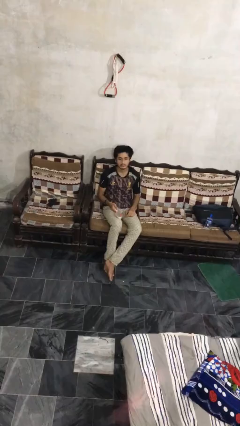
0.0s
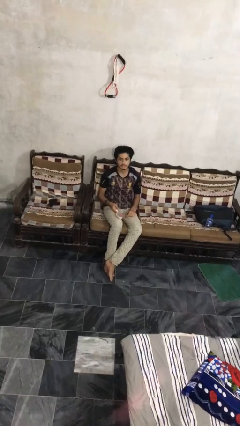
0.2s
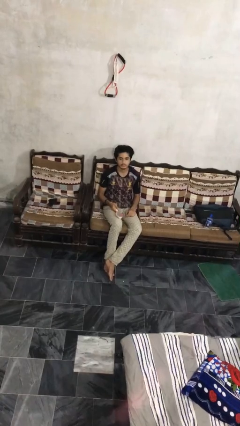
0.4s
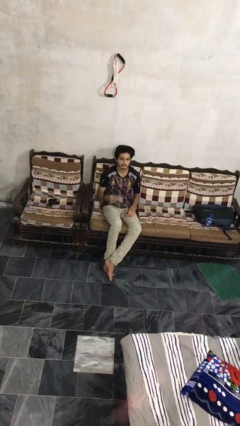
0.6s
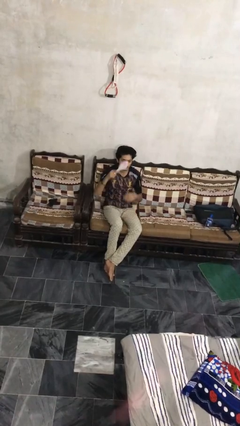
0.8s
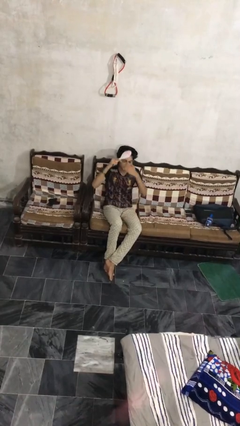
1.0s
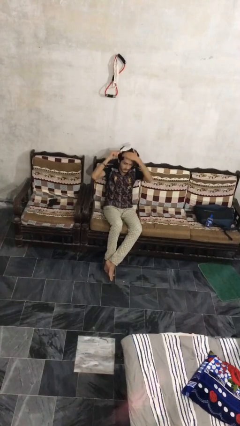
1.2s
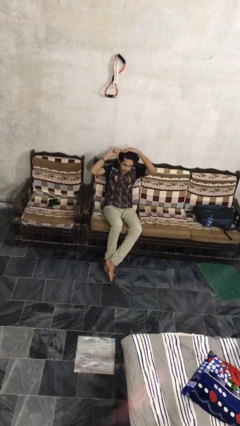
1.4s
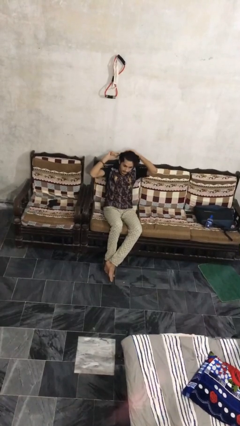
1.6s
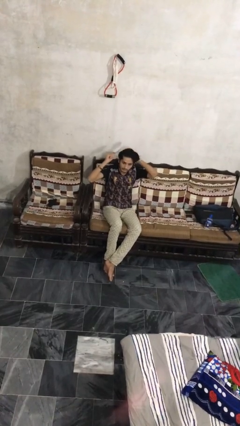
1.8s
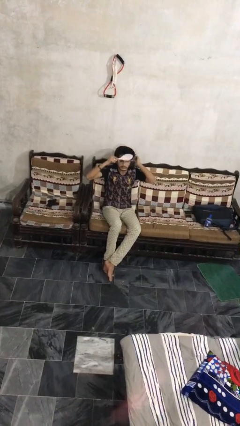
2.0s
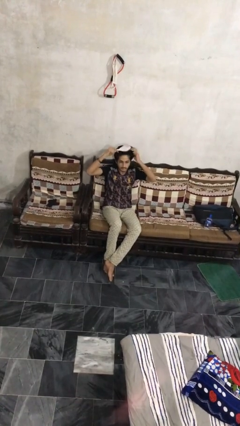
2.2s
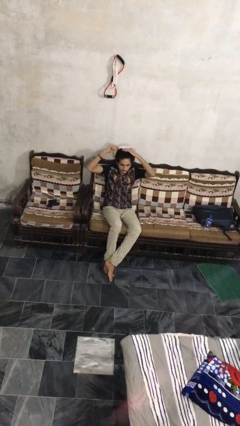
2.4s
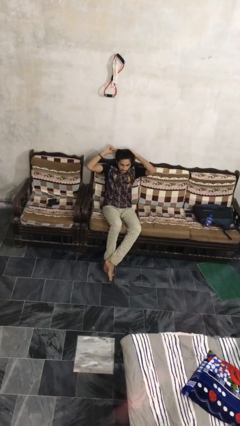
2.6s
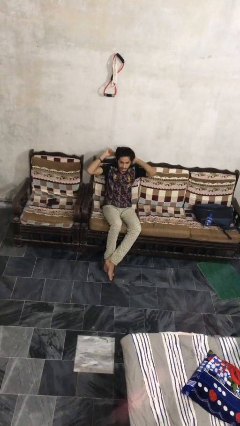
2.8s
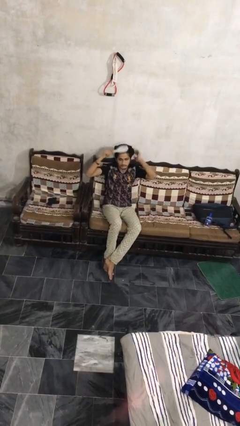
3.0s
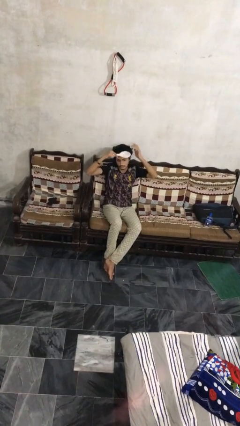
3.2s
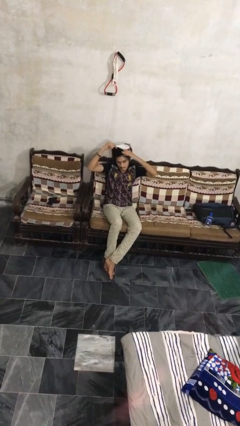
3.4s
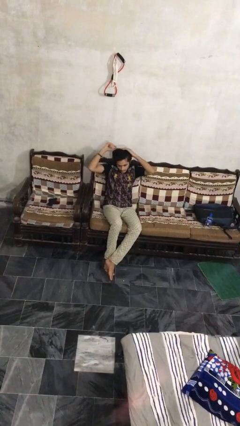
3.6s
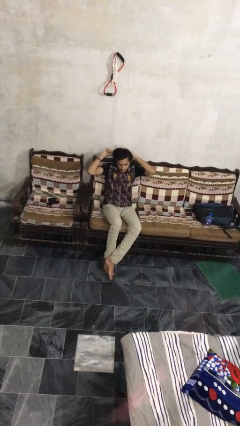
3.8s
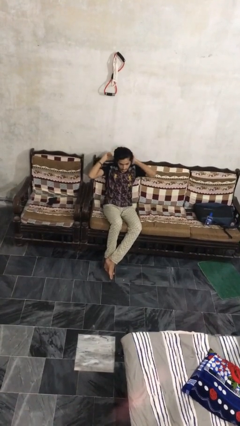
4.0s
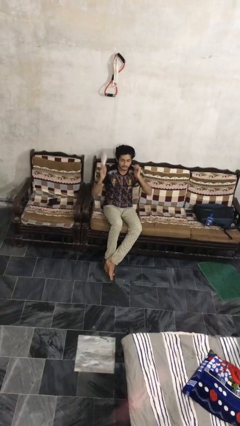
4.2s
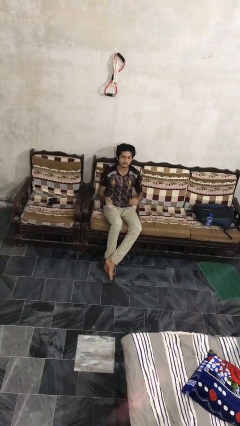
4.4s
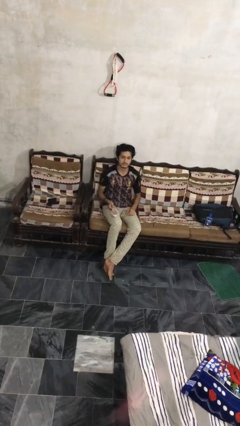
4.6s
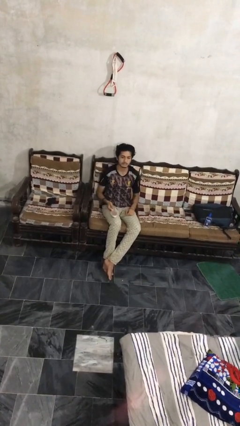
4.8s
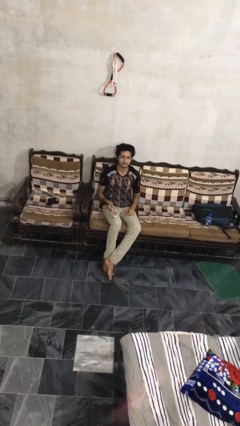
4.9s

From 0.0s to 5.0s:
person brushes hair

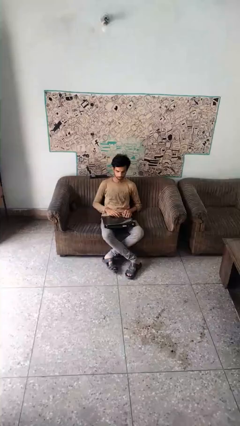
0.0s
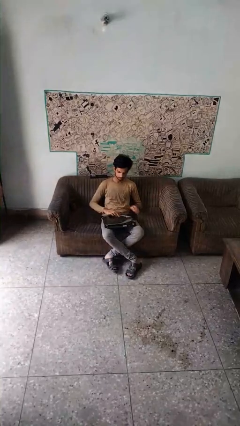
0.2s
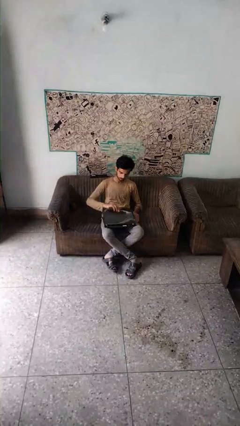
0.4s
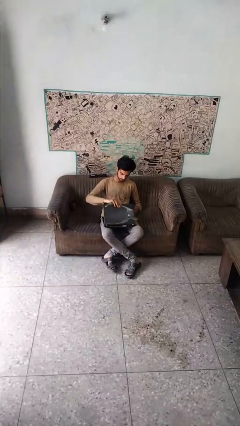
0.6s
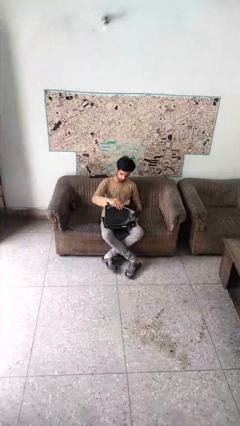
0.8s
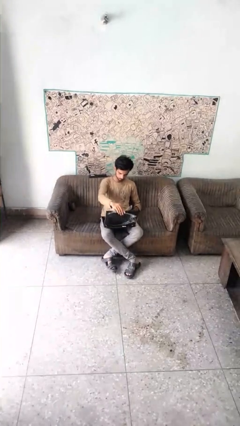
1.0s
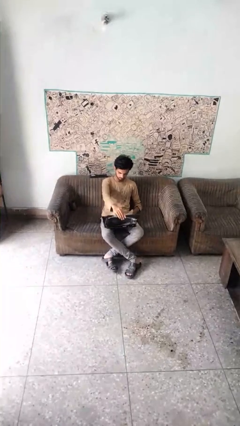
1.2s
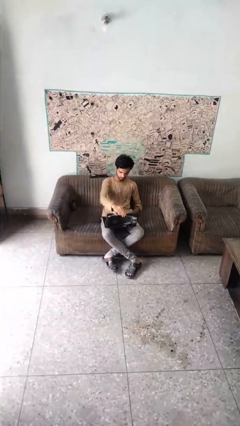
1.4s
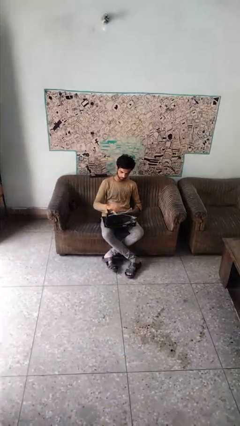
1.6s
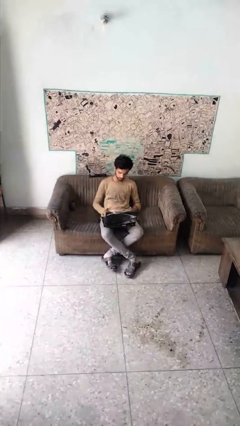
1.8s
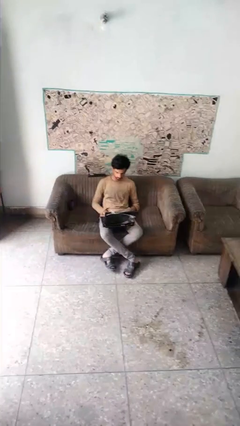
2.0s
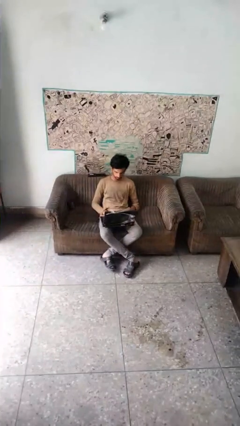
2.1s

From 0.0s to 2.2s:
person opens laptop

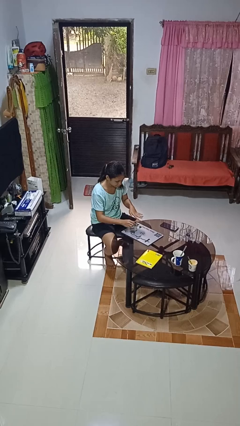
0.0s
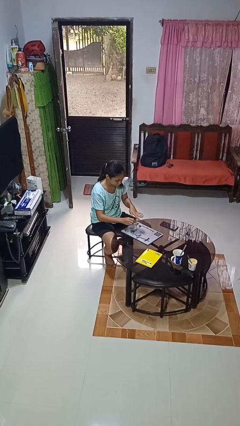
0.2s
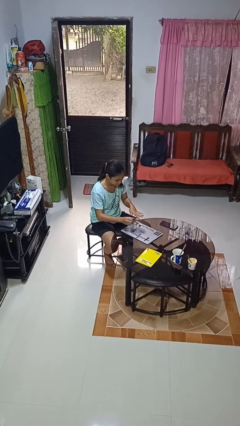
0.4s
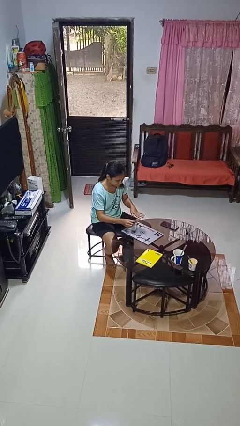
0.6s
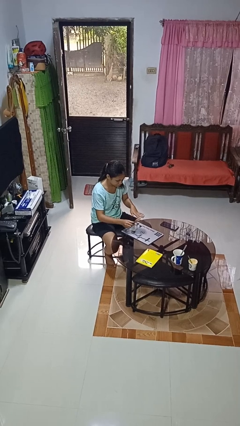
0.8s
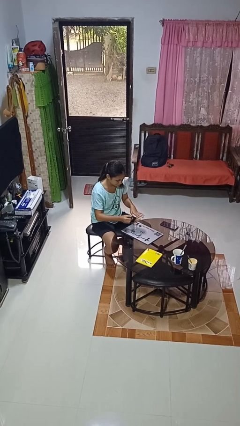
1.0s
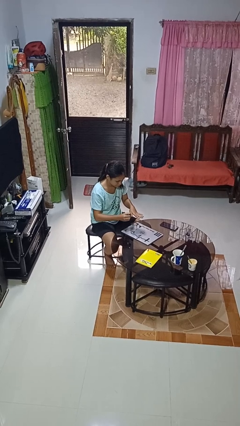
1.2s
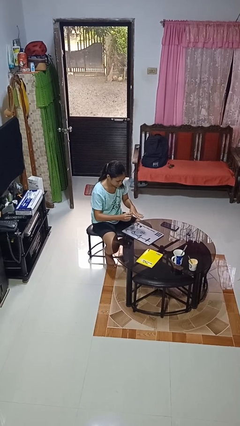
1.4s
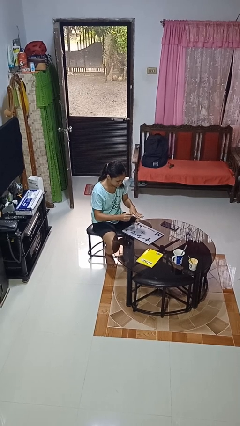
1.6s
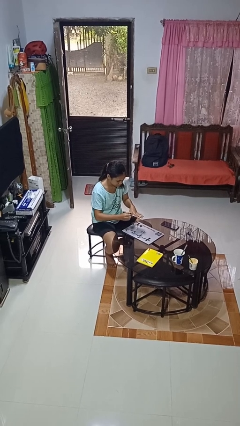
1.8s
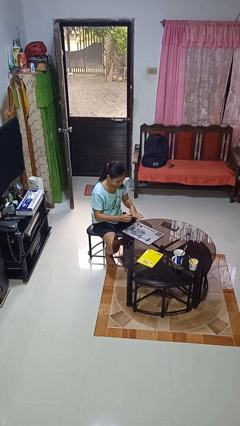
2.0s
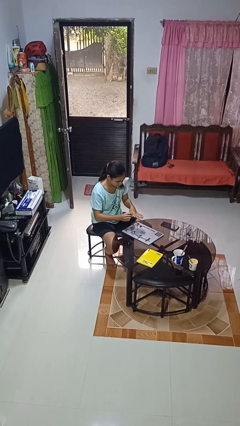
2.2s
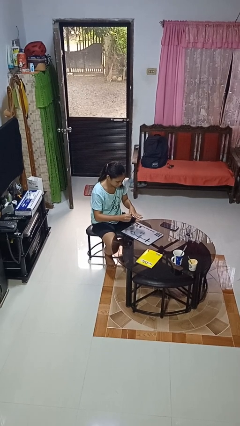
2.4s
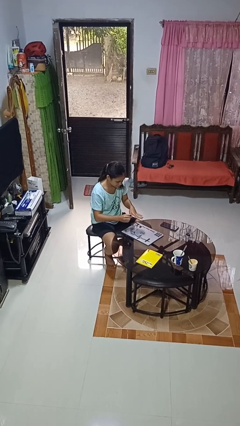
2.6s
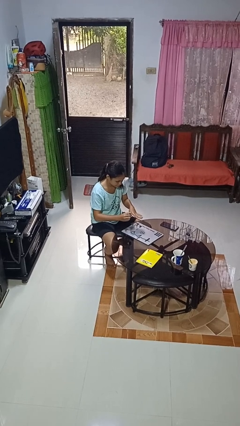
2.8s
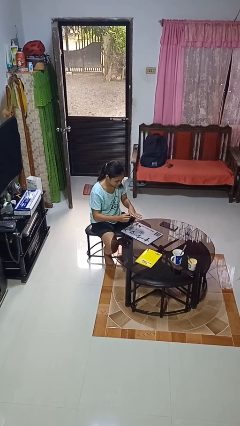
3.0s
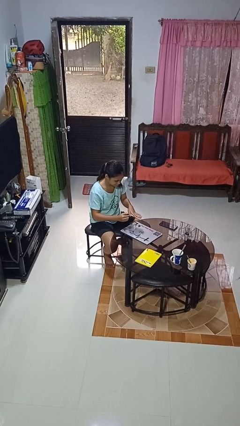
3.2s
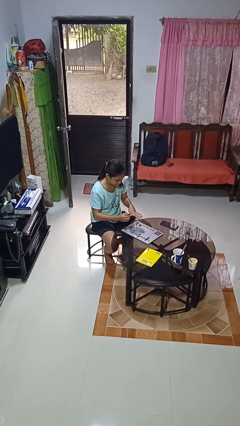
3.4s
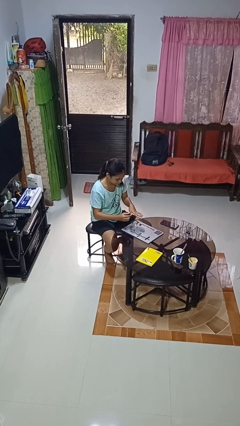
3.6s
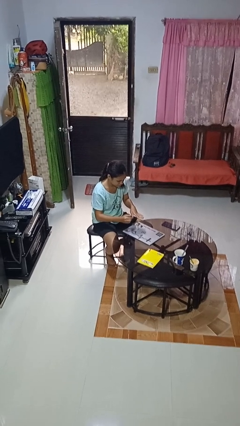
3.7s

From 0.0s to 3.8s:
person paints fingernails

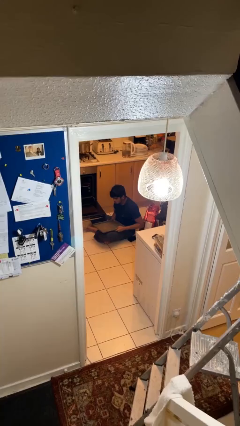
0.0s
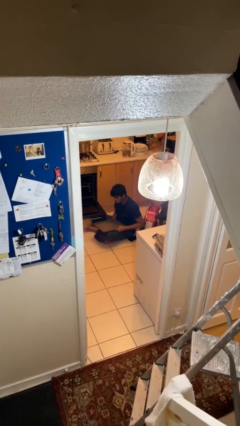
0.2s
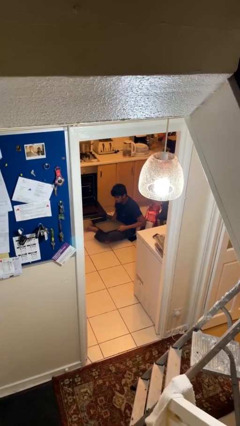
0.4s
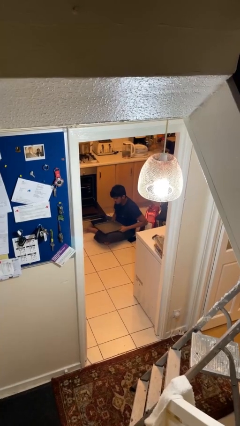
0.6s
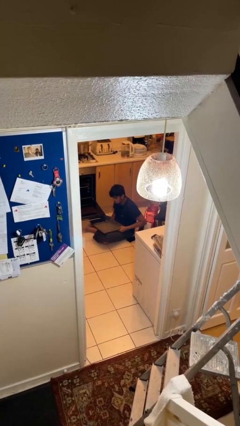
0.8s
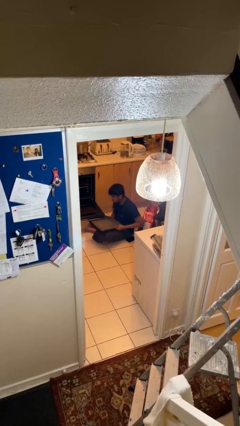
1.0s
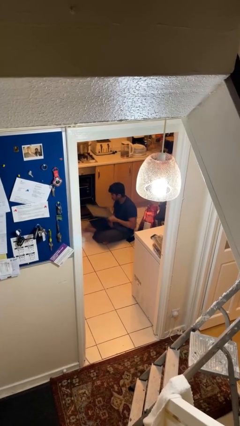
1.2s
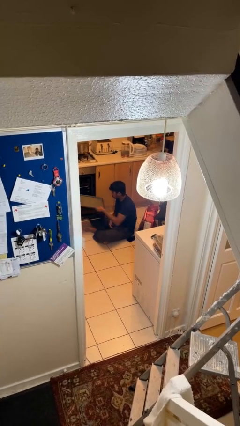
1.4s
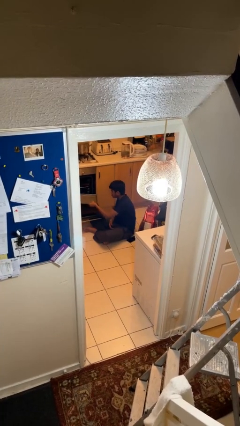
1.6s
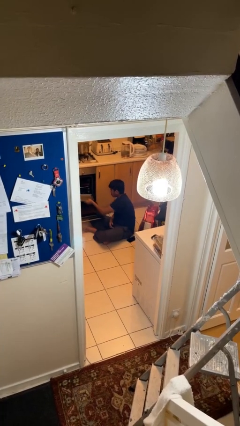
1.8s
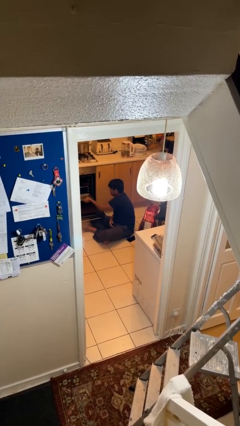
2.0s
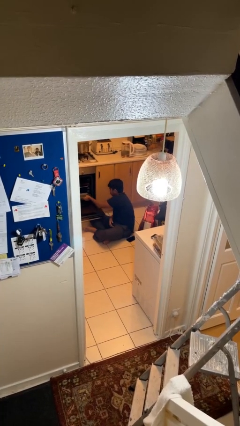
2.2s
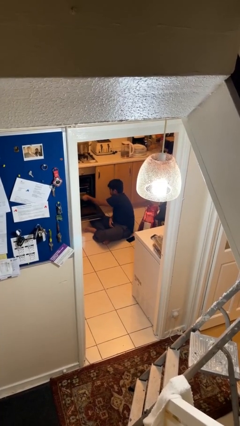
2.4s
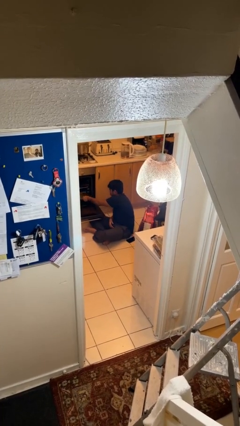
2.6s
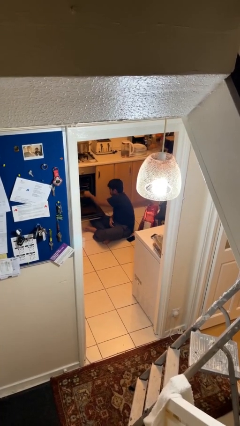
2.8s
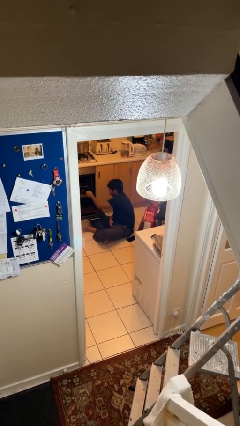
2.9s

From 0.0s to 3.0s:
person puts object into oven

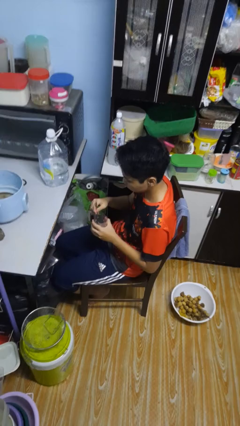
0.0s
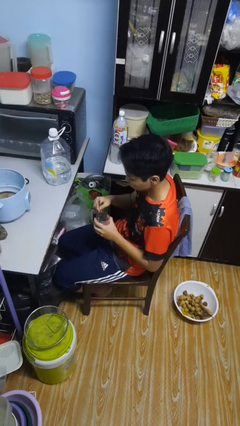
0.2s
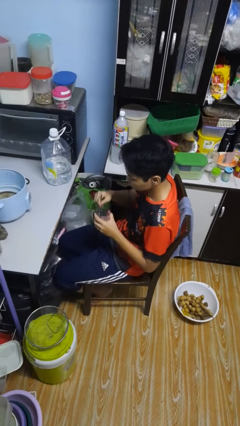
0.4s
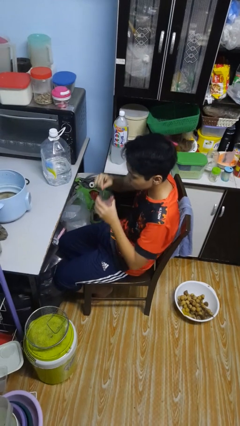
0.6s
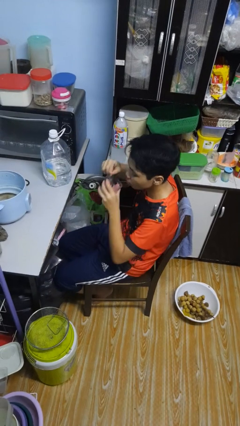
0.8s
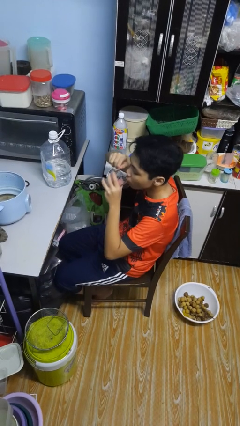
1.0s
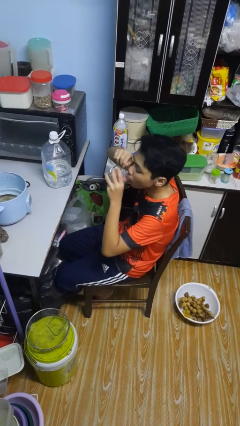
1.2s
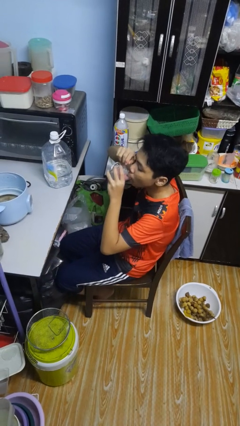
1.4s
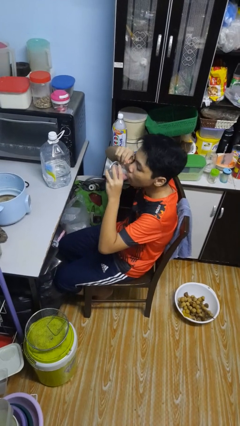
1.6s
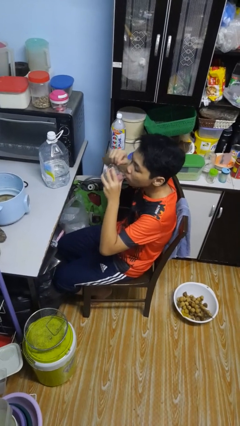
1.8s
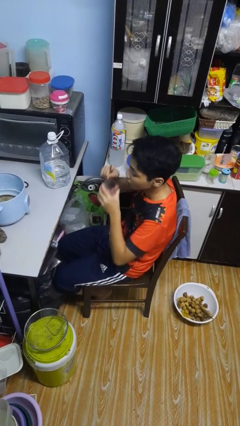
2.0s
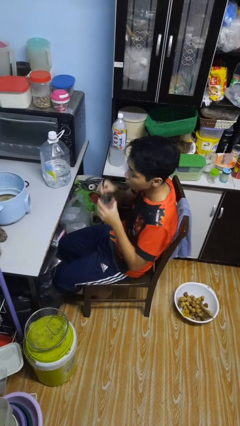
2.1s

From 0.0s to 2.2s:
person drinks from mug

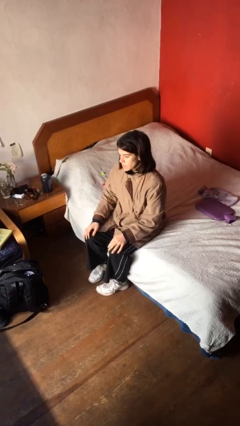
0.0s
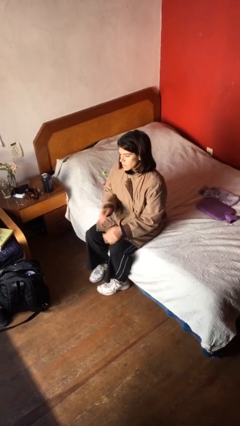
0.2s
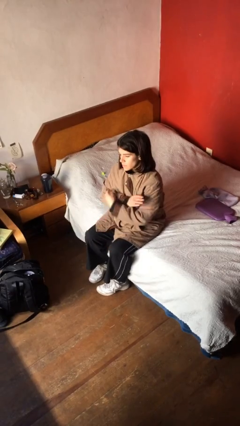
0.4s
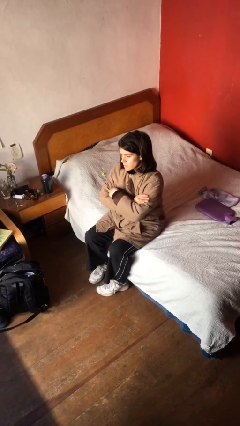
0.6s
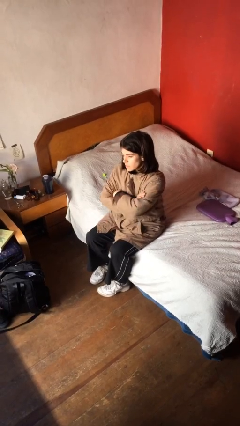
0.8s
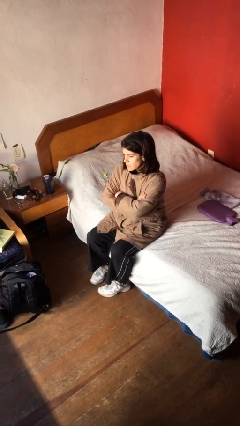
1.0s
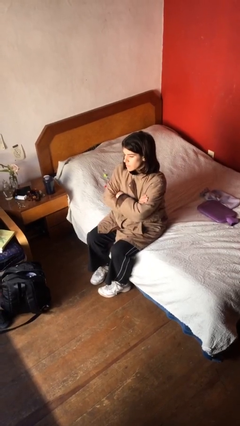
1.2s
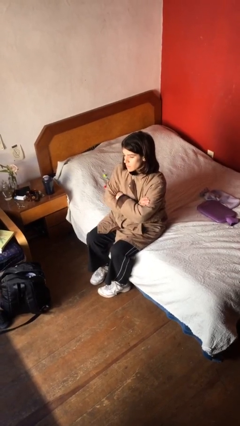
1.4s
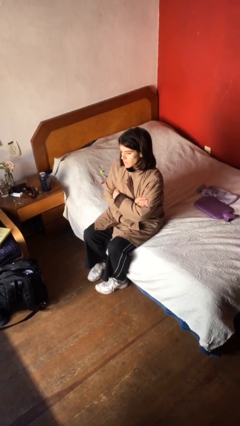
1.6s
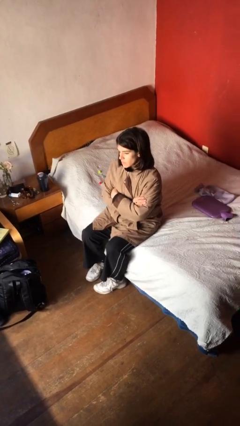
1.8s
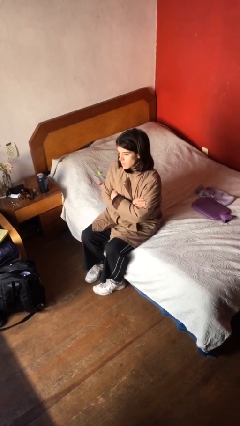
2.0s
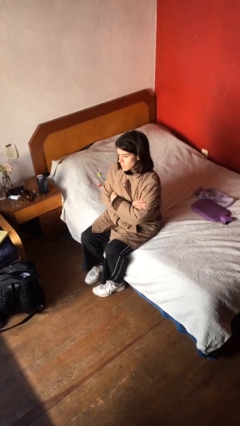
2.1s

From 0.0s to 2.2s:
person crosses arms
